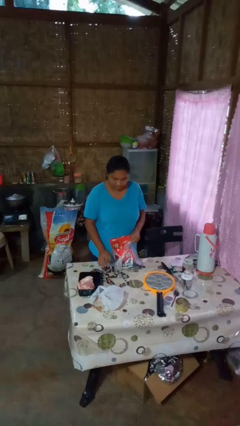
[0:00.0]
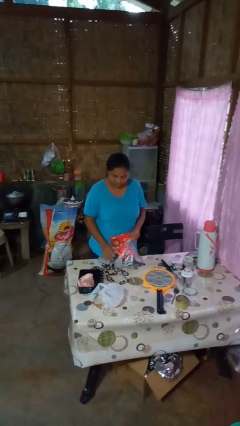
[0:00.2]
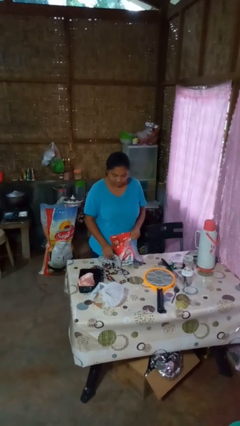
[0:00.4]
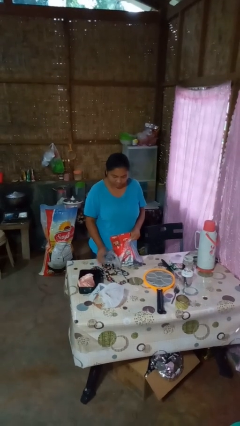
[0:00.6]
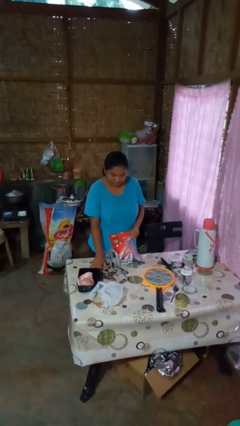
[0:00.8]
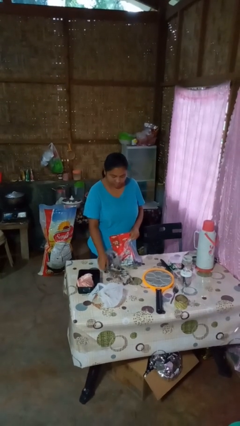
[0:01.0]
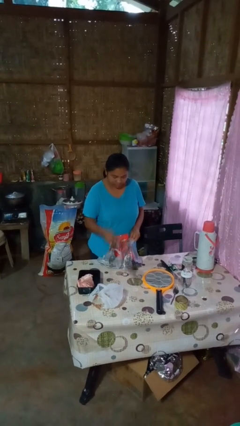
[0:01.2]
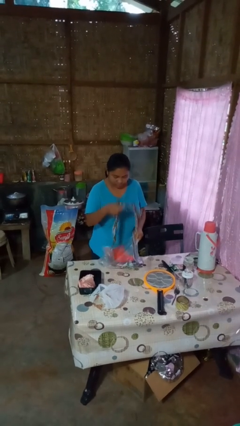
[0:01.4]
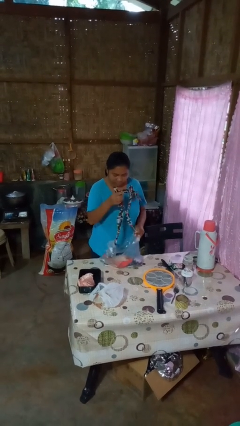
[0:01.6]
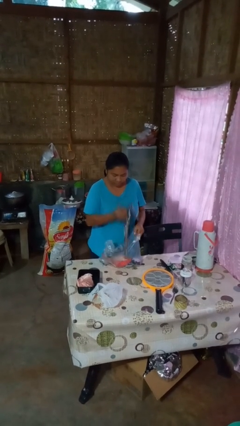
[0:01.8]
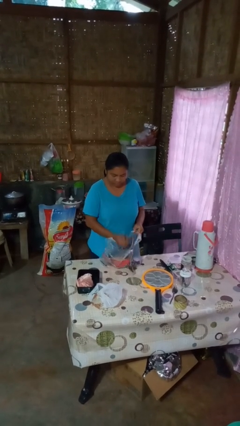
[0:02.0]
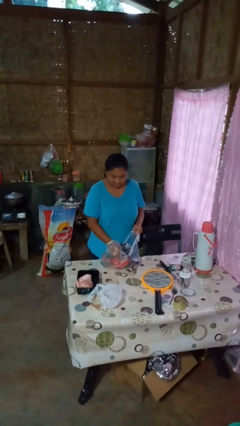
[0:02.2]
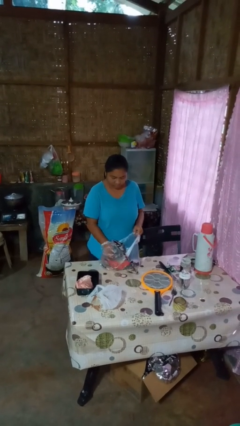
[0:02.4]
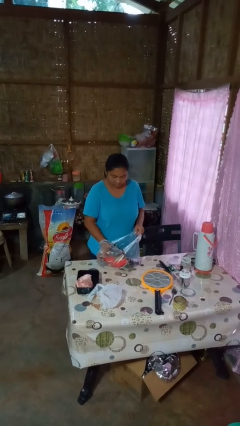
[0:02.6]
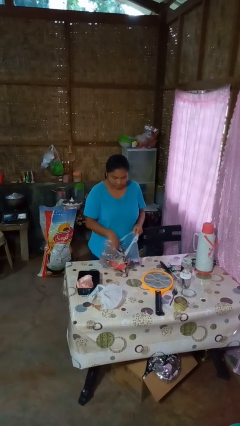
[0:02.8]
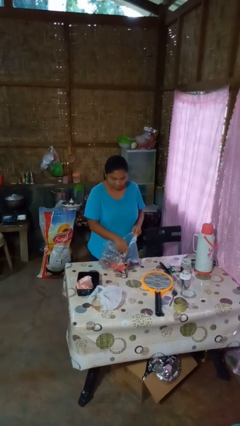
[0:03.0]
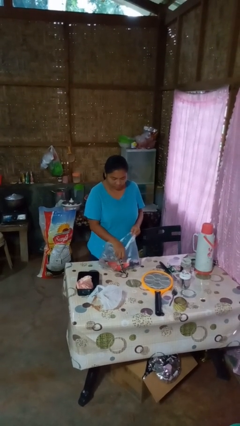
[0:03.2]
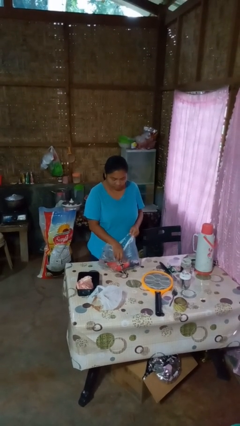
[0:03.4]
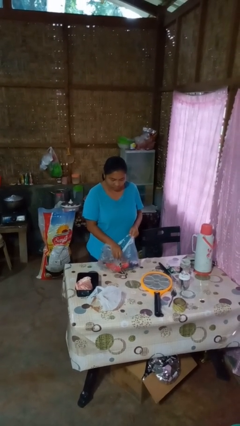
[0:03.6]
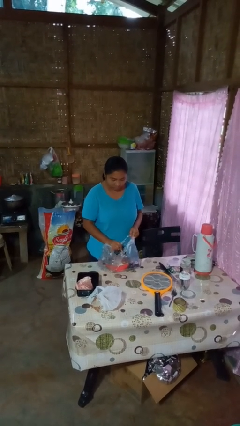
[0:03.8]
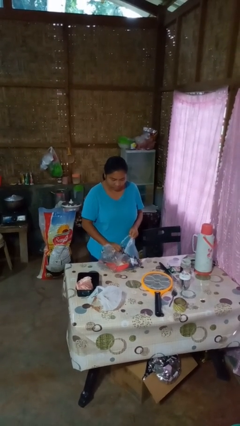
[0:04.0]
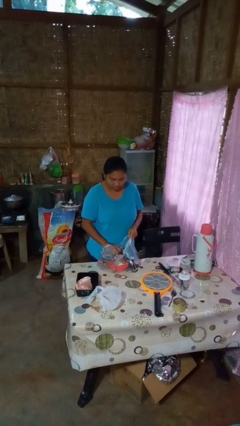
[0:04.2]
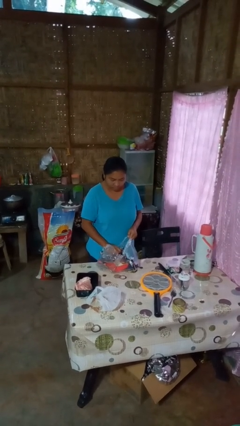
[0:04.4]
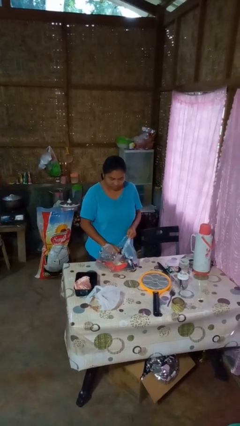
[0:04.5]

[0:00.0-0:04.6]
person puts object into bag

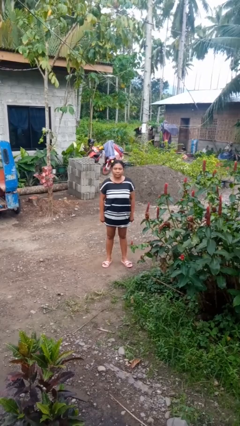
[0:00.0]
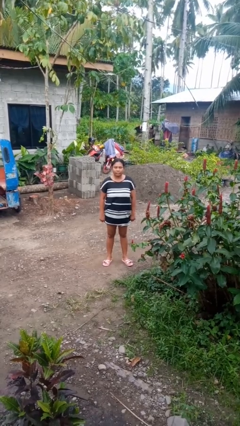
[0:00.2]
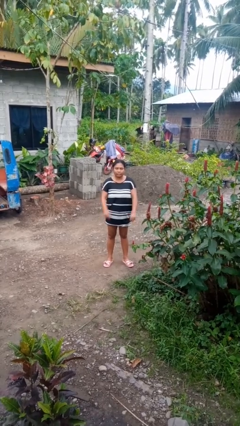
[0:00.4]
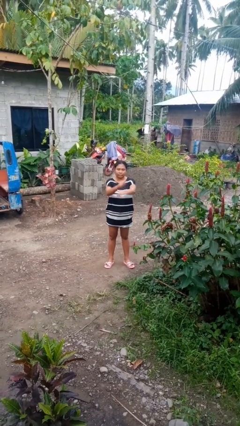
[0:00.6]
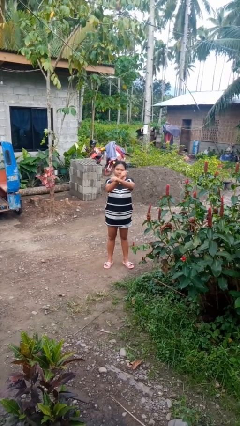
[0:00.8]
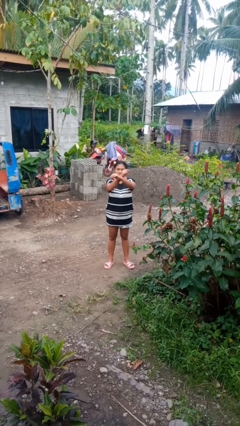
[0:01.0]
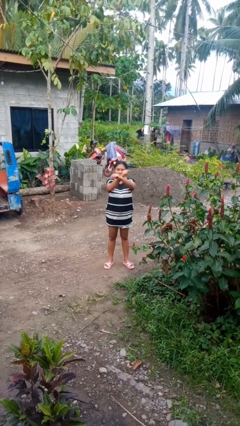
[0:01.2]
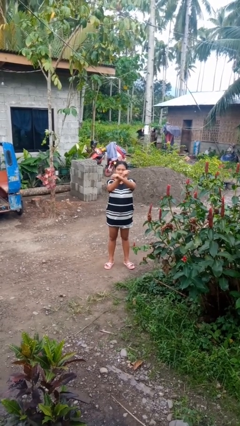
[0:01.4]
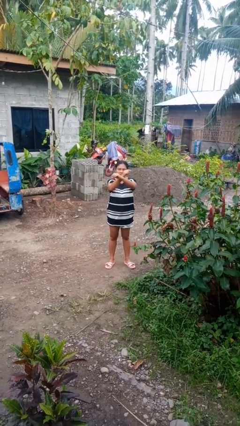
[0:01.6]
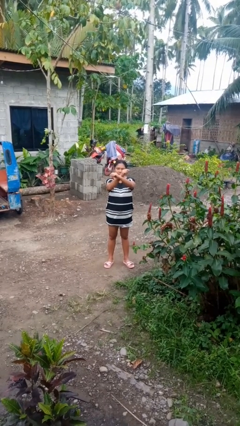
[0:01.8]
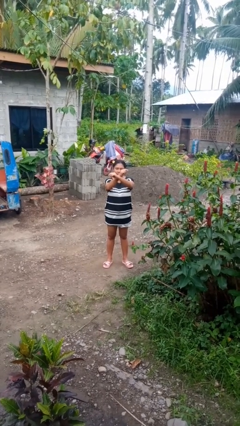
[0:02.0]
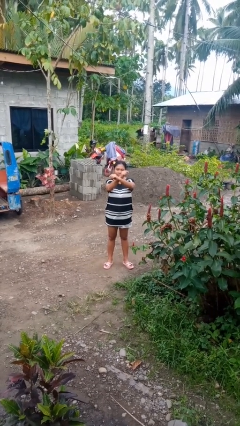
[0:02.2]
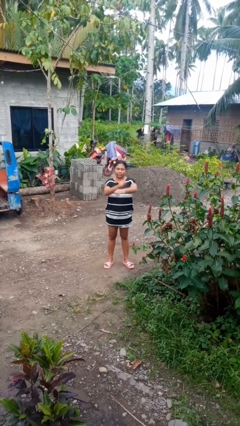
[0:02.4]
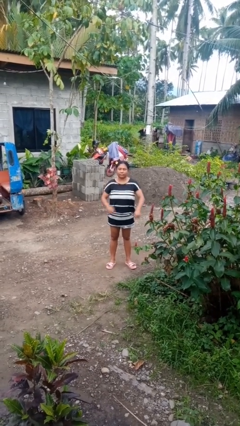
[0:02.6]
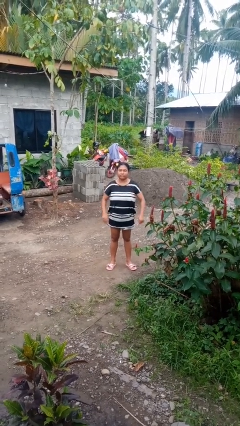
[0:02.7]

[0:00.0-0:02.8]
person gestures arms x

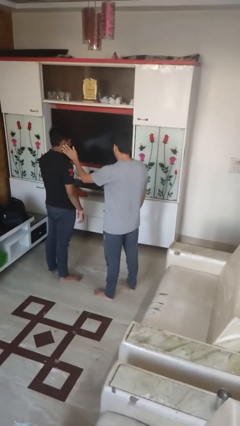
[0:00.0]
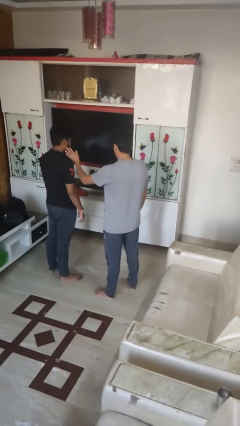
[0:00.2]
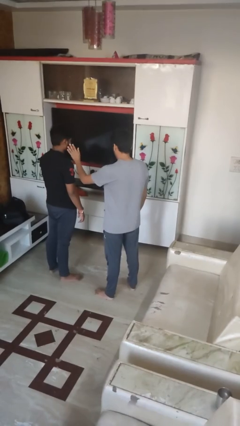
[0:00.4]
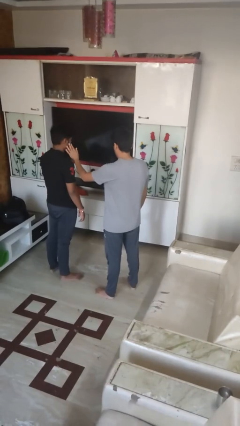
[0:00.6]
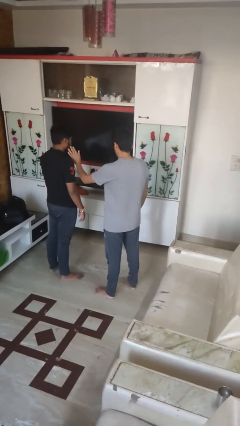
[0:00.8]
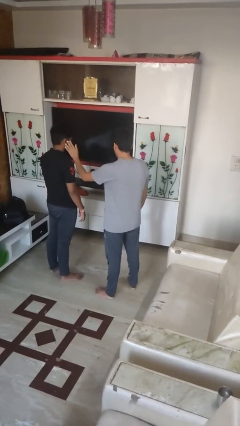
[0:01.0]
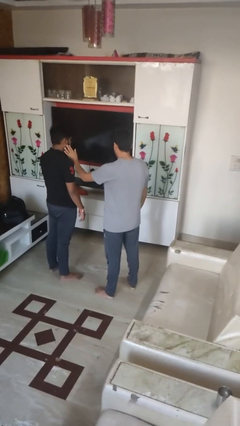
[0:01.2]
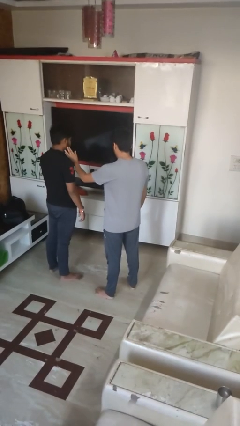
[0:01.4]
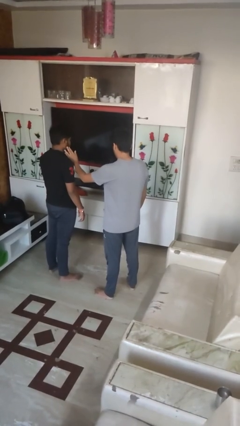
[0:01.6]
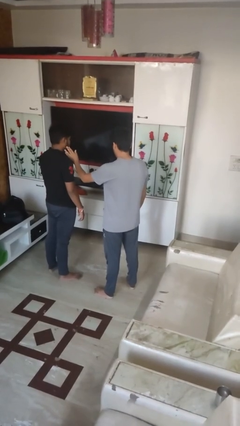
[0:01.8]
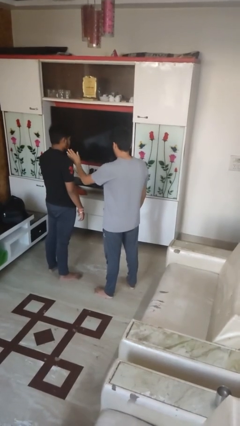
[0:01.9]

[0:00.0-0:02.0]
person touches face of person

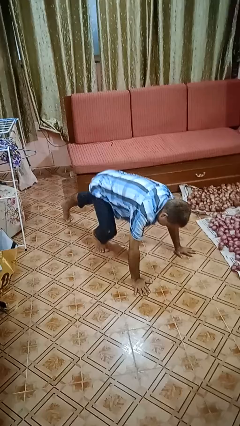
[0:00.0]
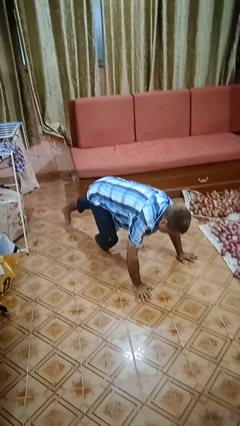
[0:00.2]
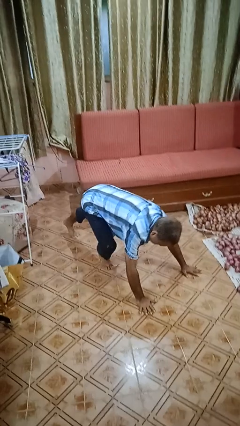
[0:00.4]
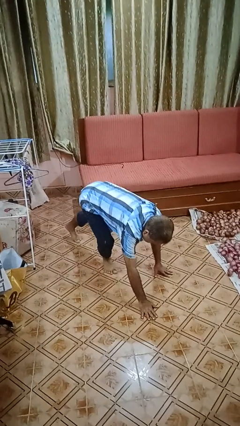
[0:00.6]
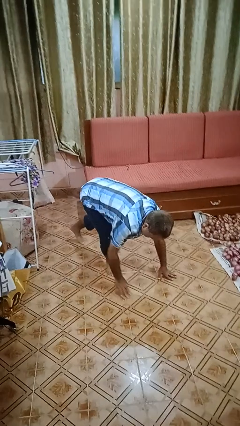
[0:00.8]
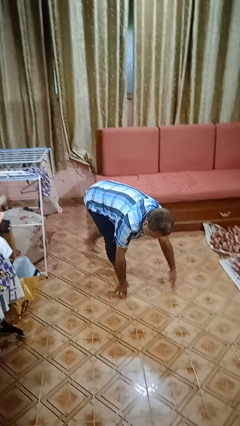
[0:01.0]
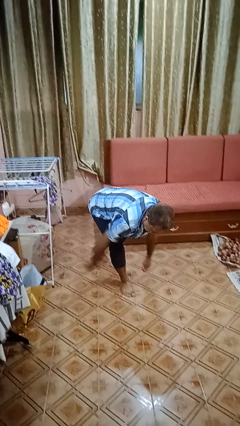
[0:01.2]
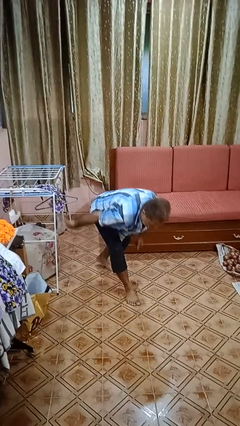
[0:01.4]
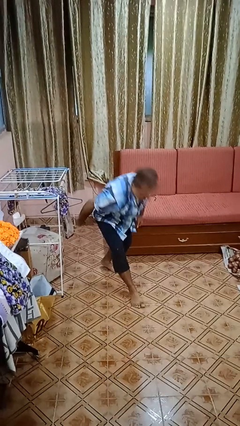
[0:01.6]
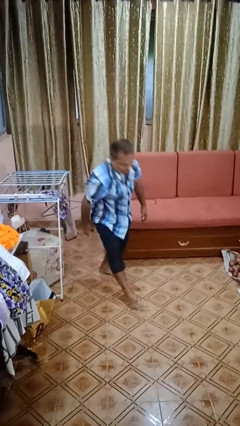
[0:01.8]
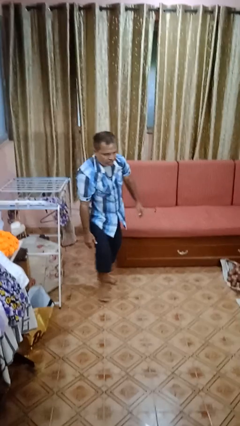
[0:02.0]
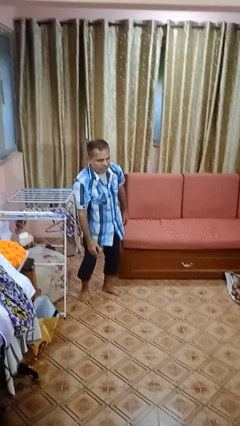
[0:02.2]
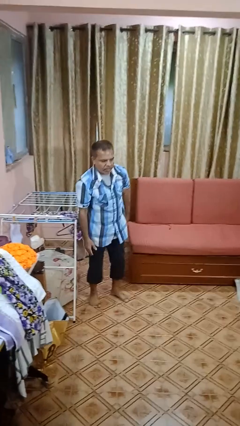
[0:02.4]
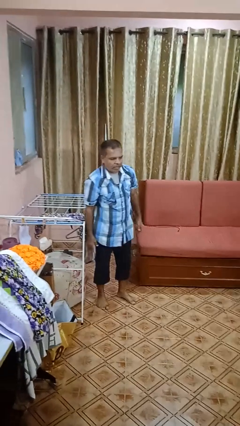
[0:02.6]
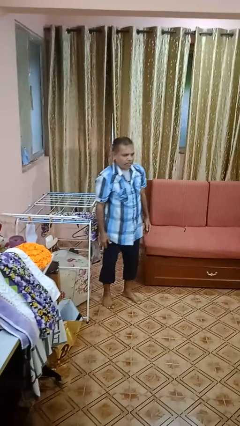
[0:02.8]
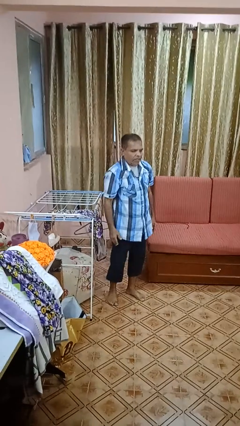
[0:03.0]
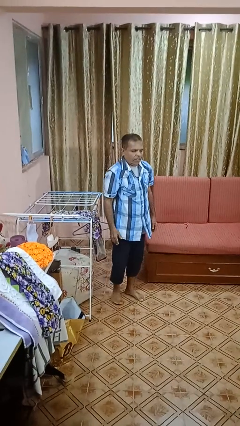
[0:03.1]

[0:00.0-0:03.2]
person stands up from floor

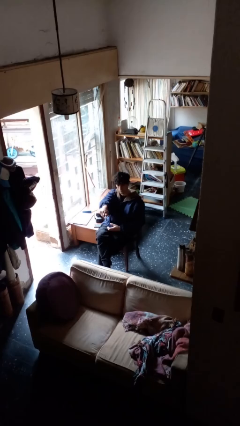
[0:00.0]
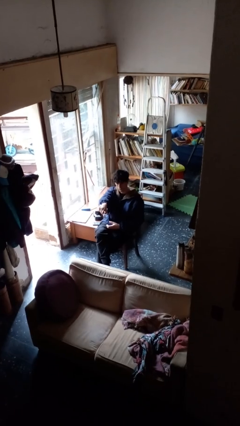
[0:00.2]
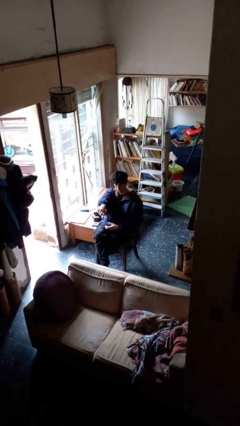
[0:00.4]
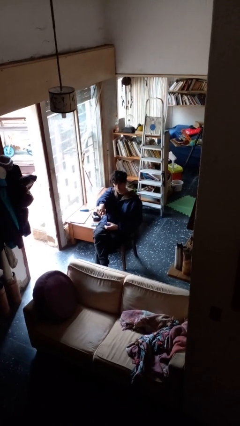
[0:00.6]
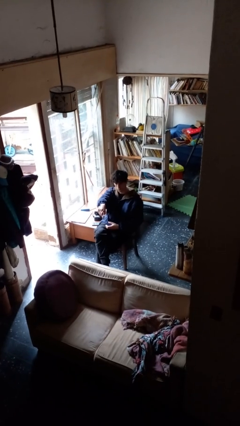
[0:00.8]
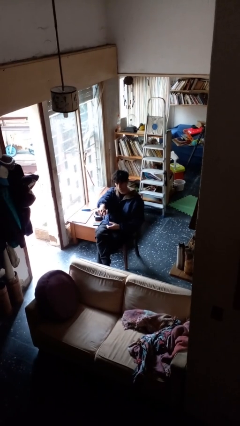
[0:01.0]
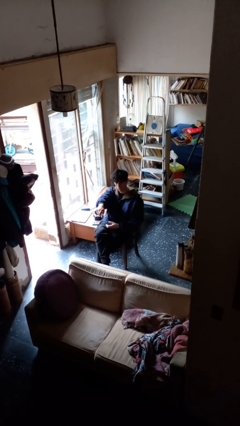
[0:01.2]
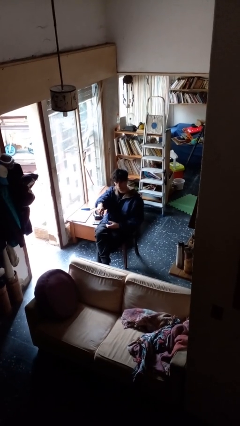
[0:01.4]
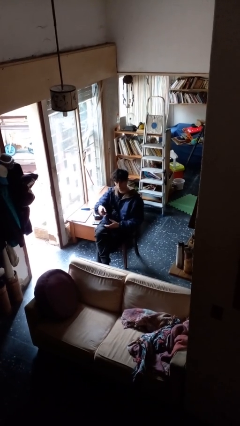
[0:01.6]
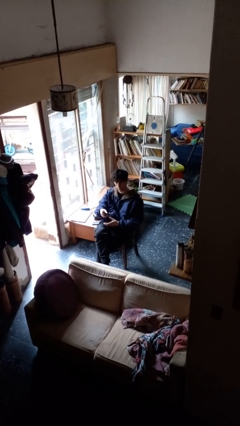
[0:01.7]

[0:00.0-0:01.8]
person uses television remote

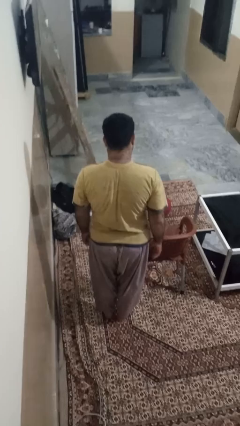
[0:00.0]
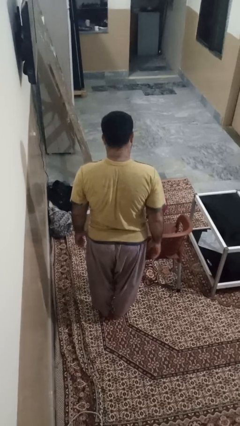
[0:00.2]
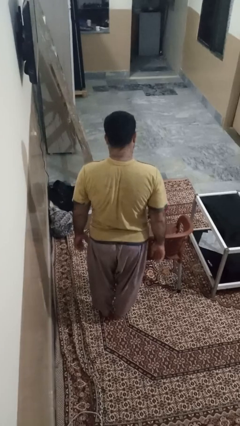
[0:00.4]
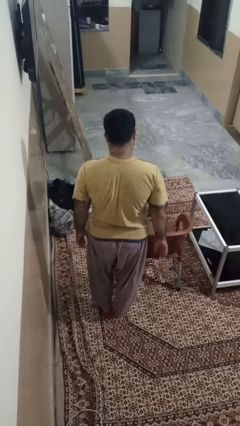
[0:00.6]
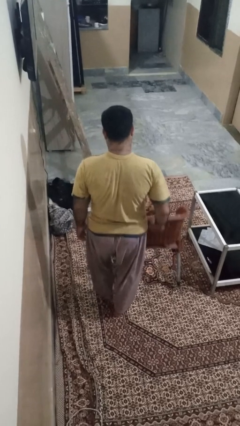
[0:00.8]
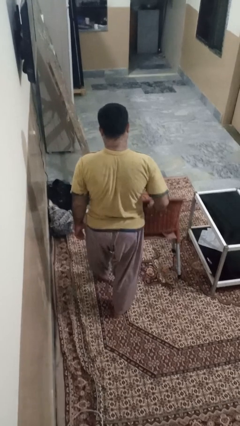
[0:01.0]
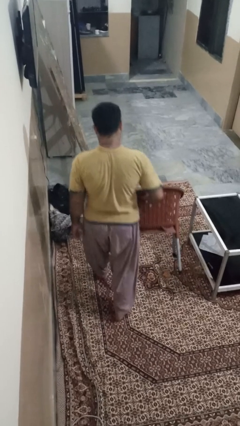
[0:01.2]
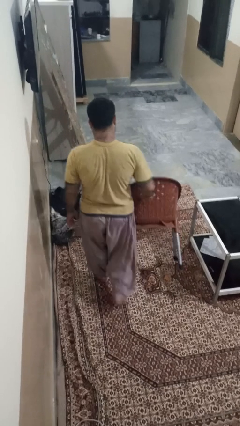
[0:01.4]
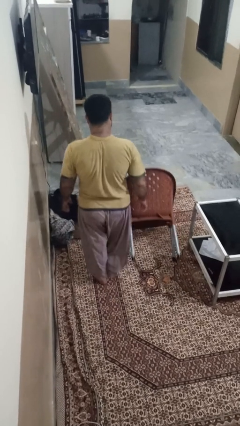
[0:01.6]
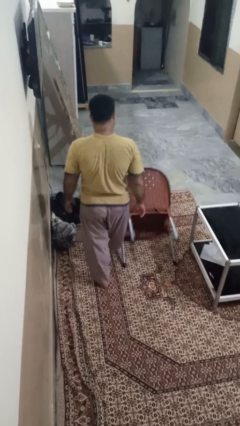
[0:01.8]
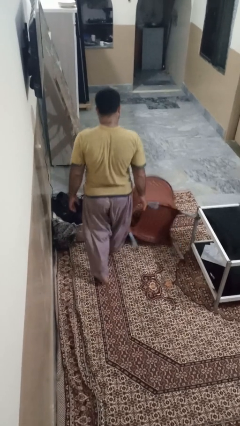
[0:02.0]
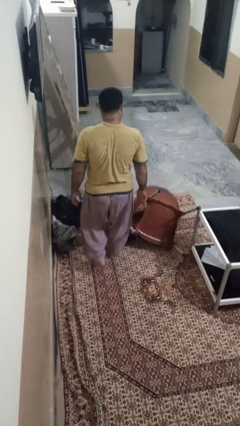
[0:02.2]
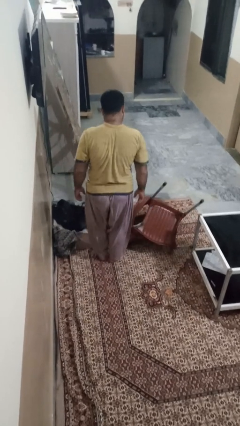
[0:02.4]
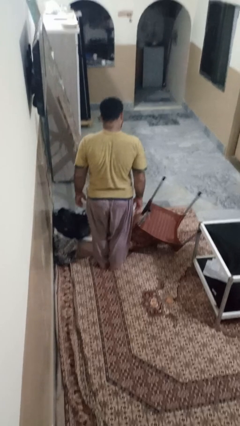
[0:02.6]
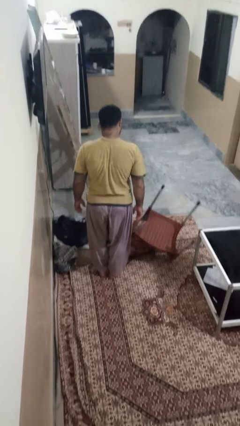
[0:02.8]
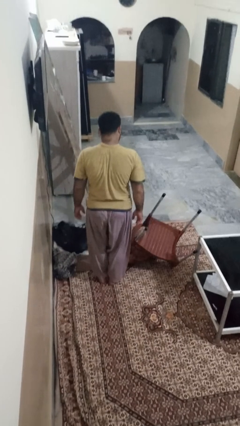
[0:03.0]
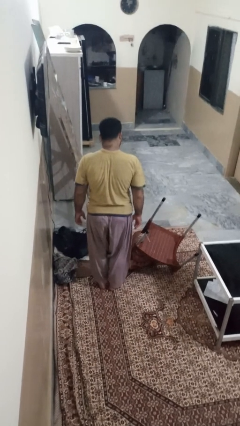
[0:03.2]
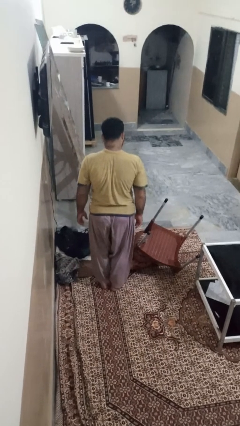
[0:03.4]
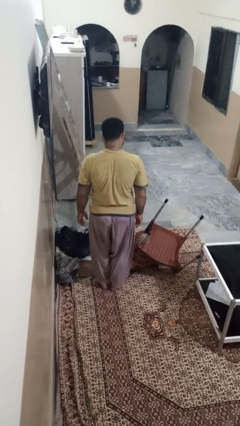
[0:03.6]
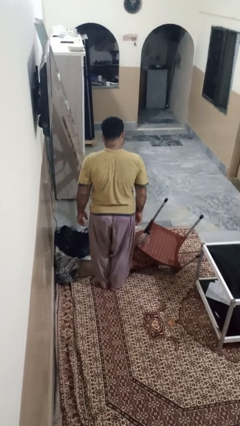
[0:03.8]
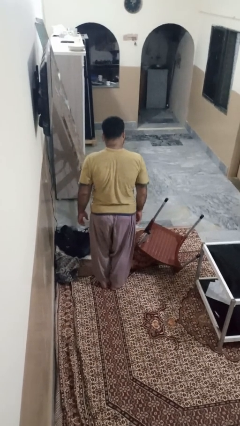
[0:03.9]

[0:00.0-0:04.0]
person knocks over furniture
